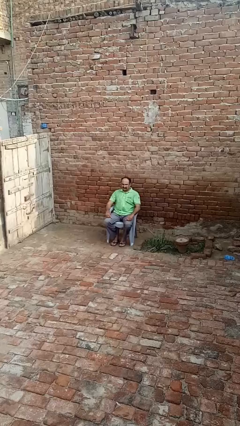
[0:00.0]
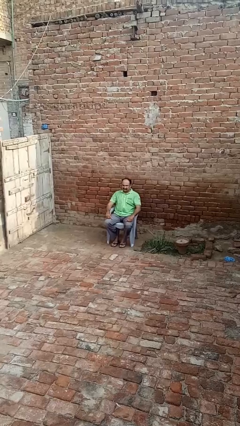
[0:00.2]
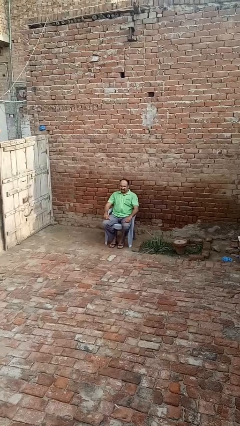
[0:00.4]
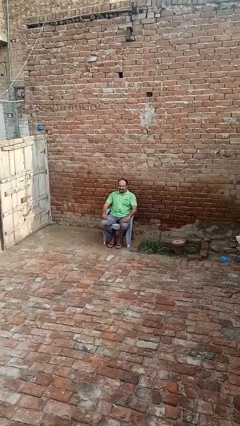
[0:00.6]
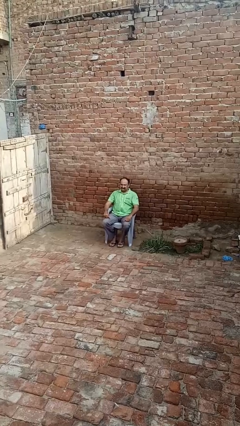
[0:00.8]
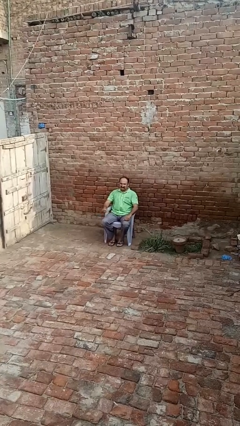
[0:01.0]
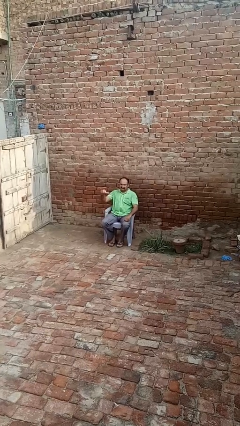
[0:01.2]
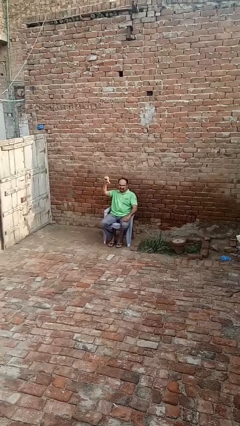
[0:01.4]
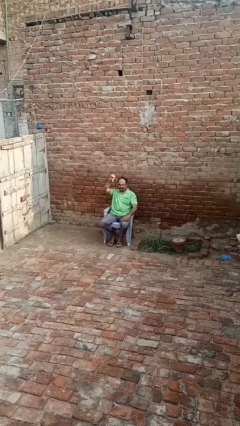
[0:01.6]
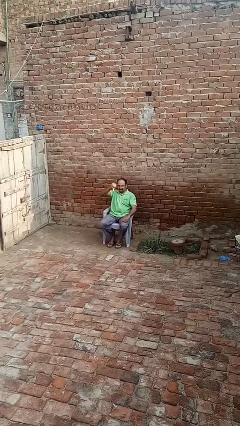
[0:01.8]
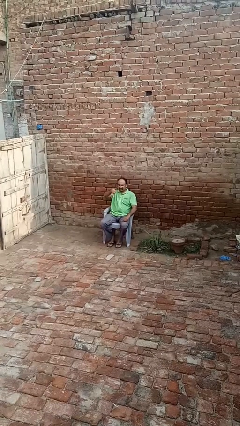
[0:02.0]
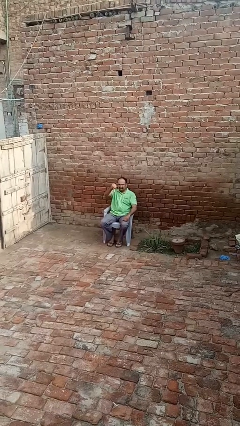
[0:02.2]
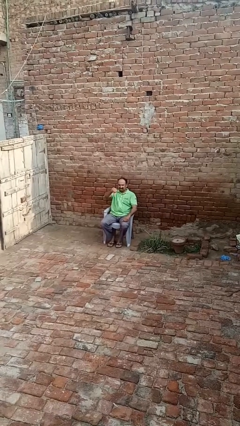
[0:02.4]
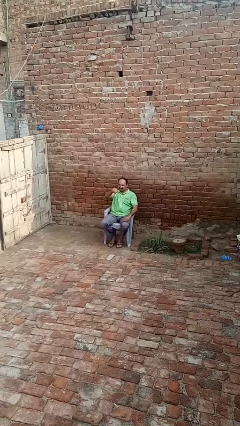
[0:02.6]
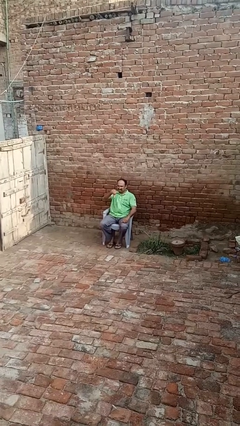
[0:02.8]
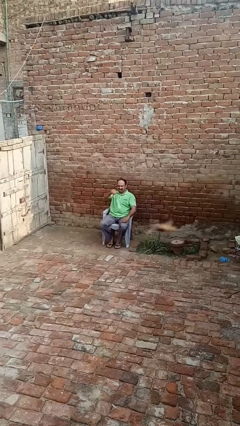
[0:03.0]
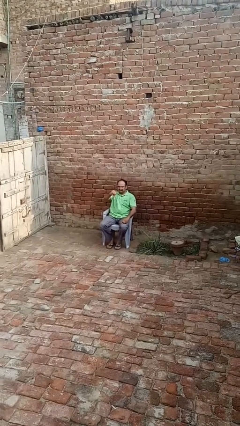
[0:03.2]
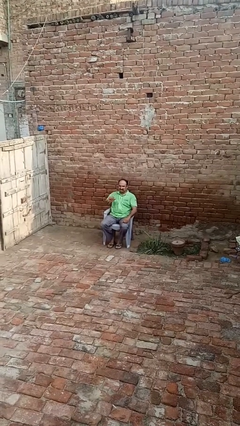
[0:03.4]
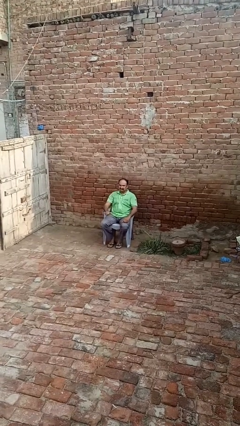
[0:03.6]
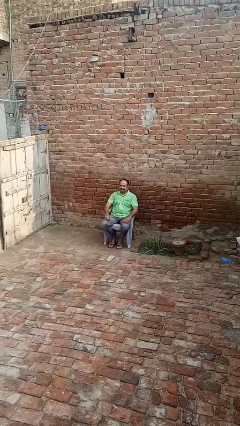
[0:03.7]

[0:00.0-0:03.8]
person gestures thumbs down

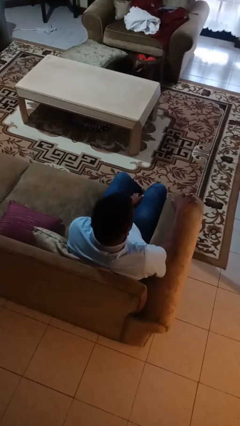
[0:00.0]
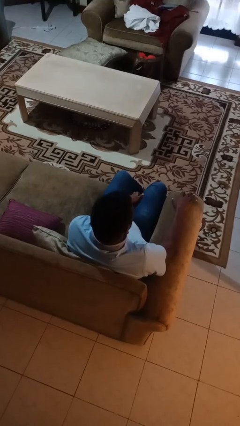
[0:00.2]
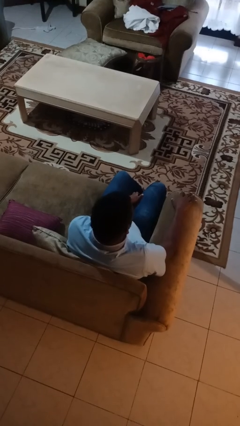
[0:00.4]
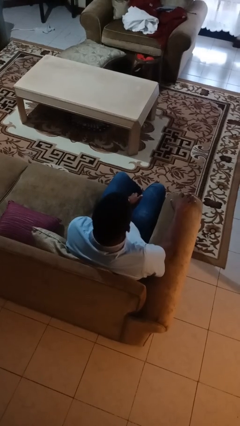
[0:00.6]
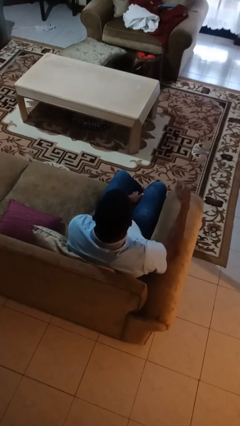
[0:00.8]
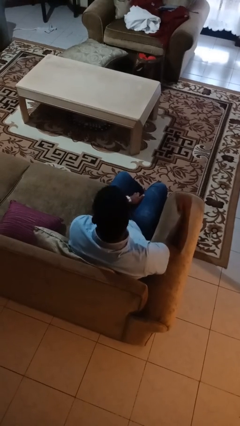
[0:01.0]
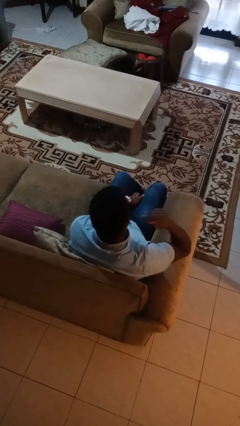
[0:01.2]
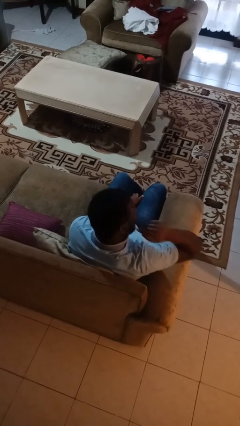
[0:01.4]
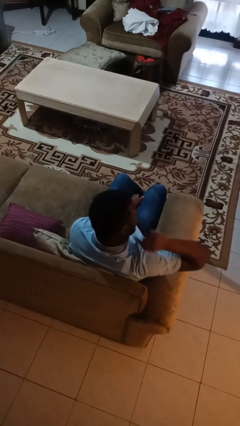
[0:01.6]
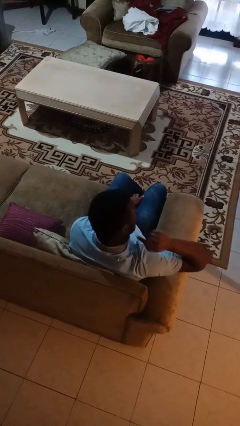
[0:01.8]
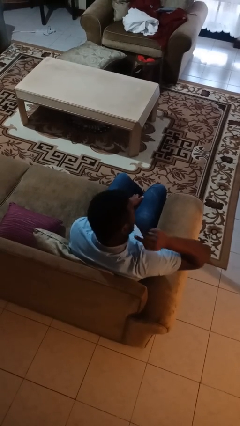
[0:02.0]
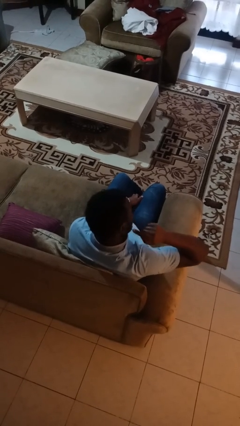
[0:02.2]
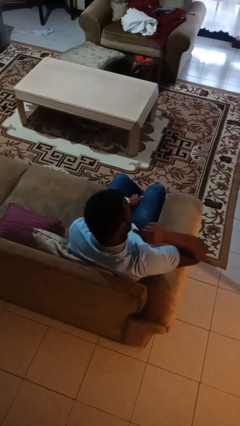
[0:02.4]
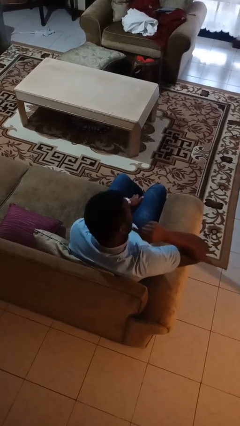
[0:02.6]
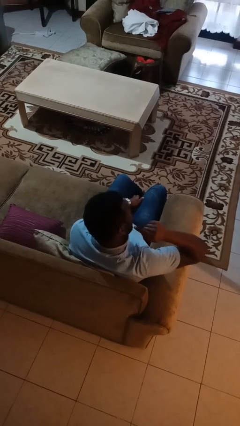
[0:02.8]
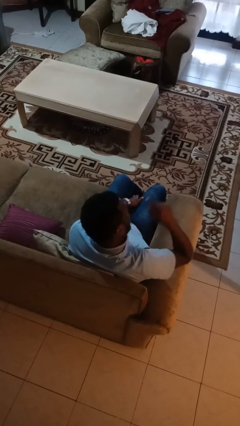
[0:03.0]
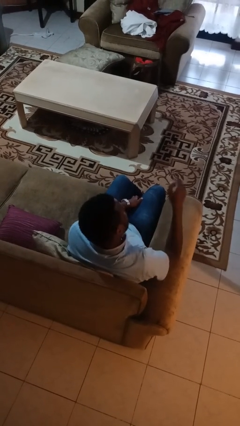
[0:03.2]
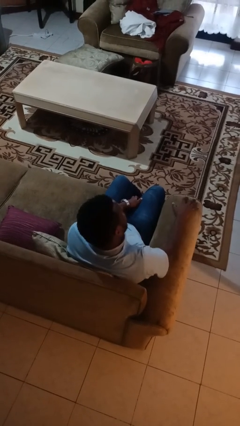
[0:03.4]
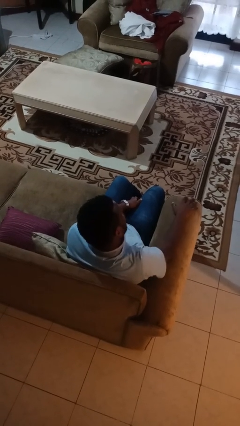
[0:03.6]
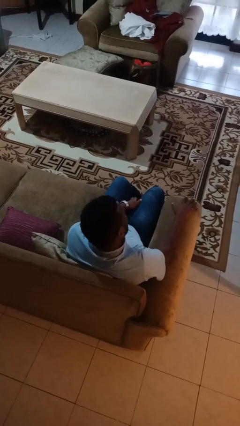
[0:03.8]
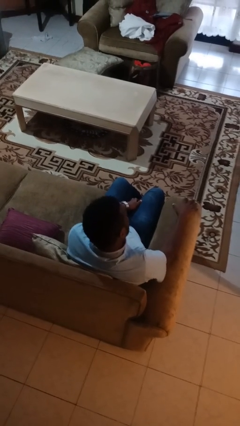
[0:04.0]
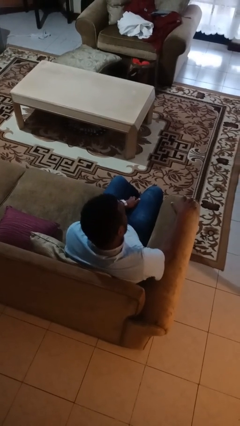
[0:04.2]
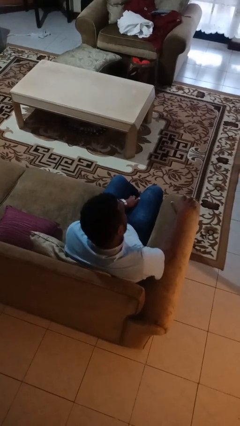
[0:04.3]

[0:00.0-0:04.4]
person gestures listen closely

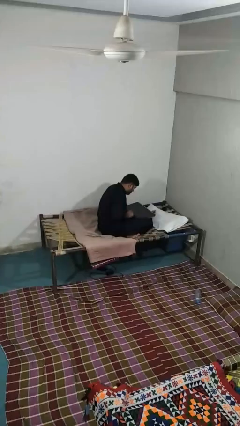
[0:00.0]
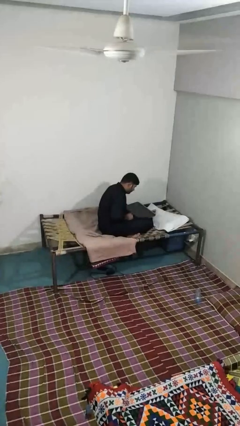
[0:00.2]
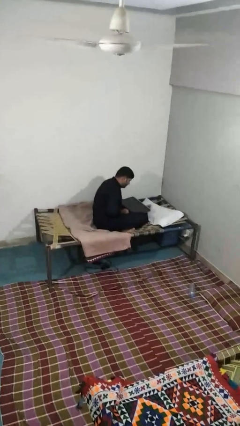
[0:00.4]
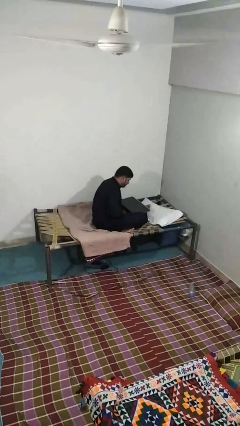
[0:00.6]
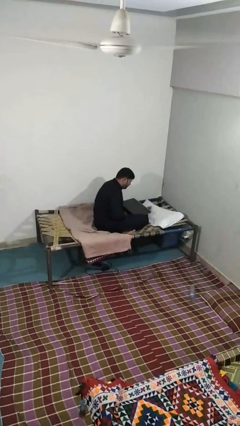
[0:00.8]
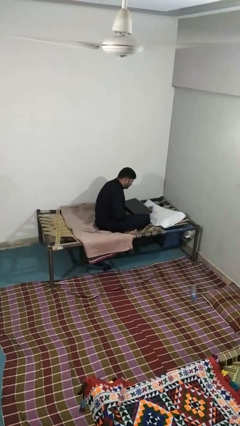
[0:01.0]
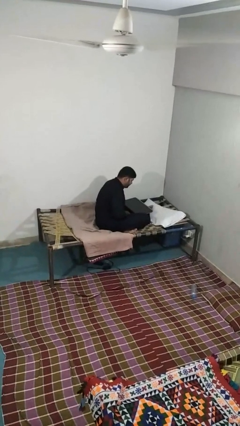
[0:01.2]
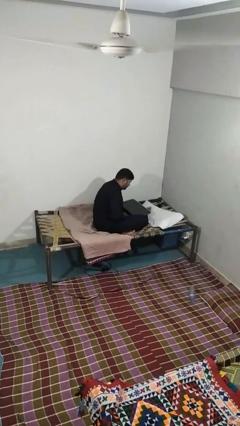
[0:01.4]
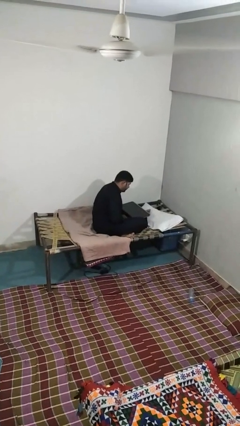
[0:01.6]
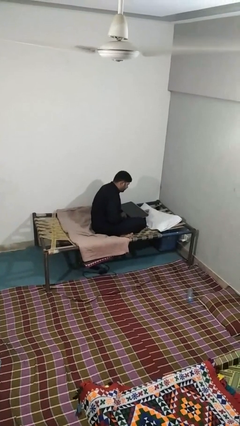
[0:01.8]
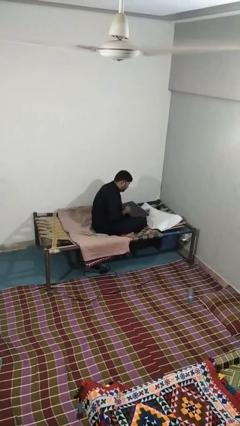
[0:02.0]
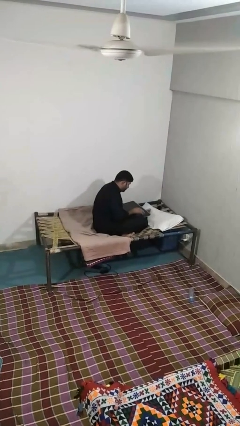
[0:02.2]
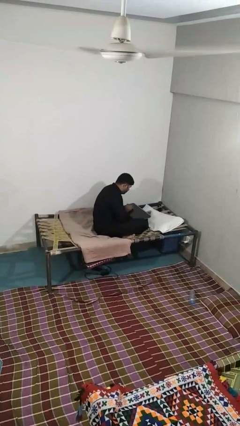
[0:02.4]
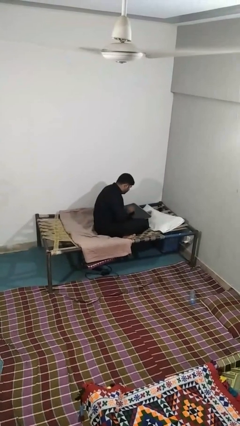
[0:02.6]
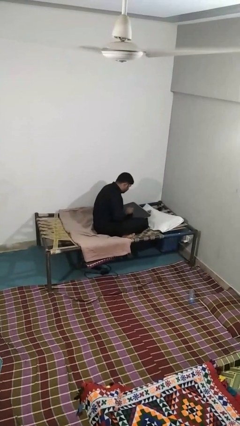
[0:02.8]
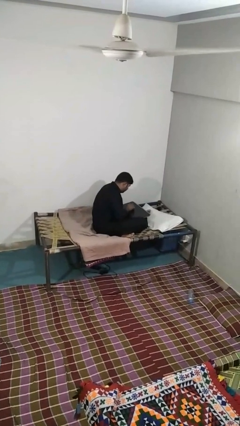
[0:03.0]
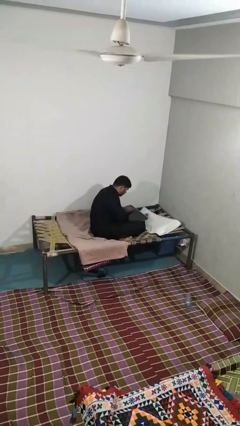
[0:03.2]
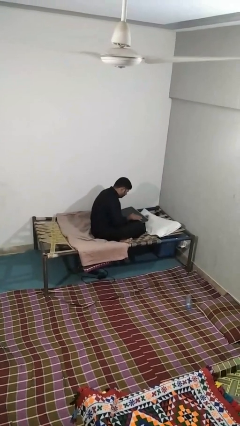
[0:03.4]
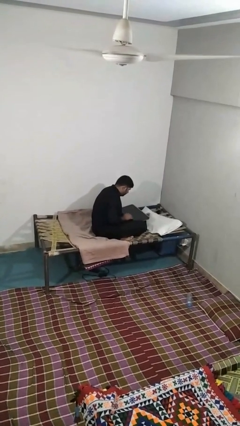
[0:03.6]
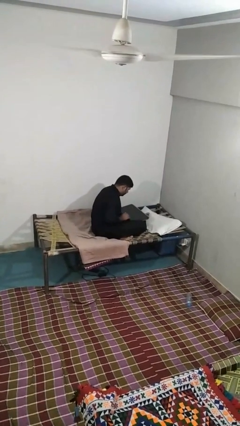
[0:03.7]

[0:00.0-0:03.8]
person interacts with tablet

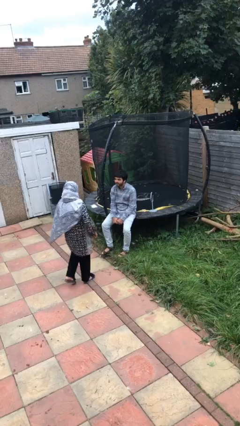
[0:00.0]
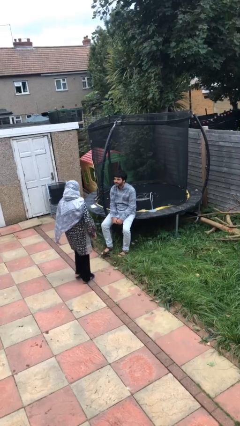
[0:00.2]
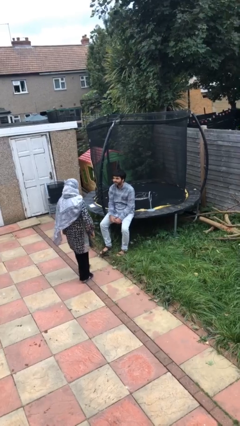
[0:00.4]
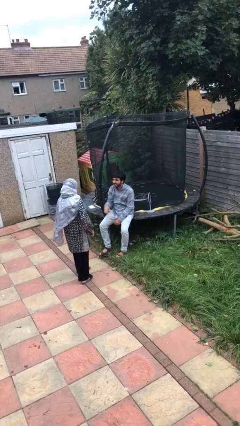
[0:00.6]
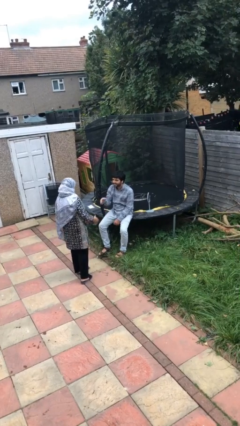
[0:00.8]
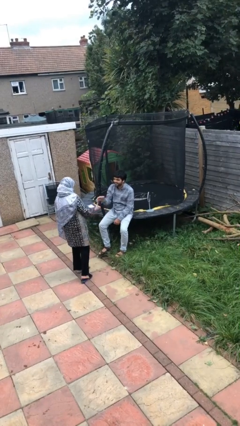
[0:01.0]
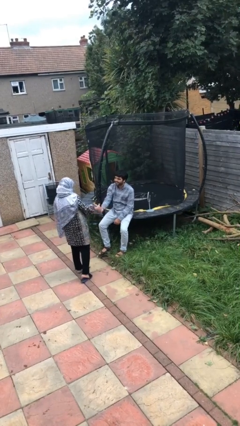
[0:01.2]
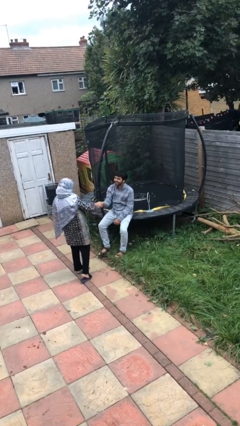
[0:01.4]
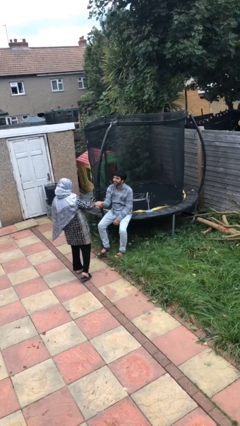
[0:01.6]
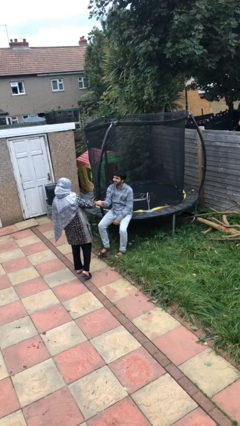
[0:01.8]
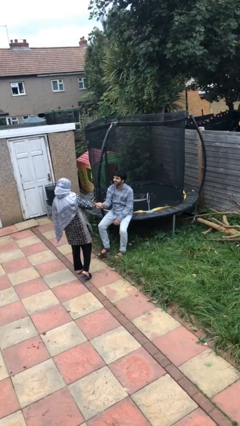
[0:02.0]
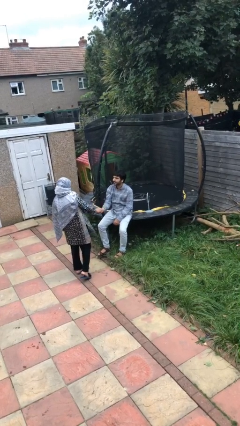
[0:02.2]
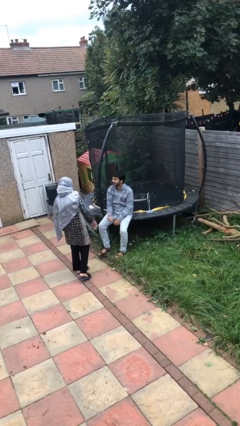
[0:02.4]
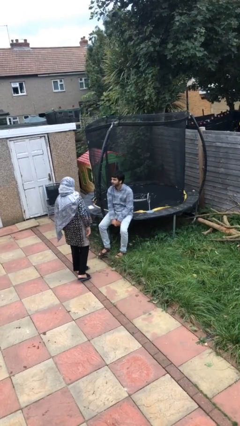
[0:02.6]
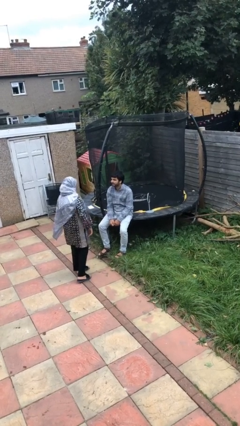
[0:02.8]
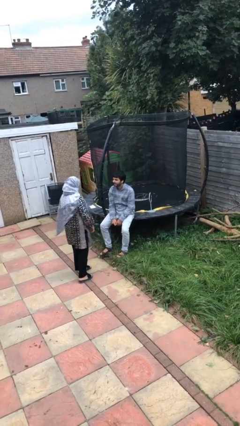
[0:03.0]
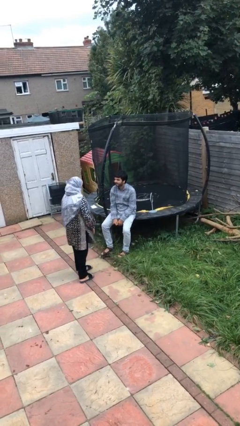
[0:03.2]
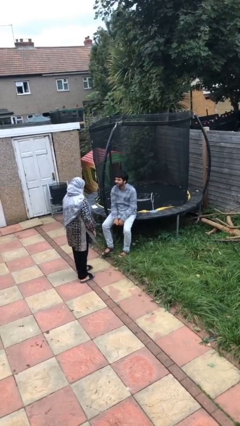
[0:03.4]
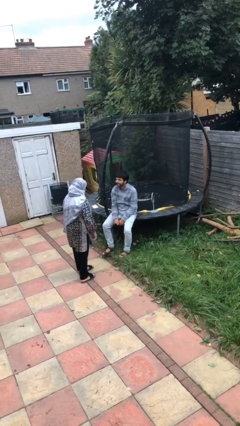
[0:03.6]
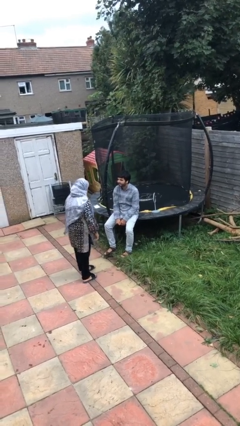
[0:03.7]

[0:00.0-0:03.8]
person shakes hand

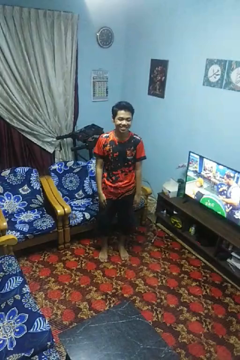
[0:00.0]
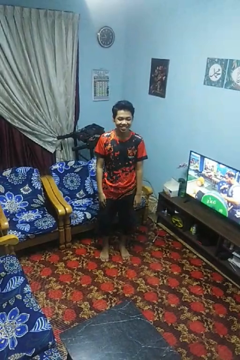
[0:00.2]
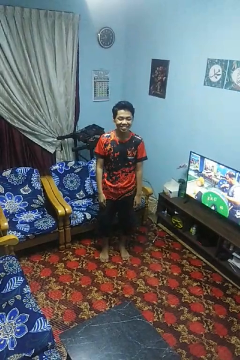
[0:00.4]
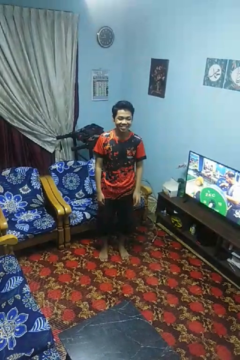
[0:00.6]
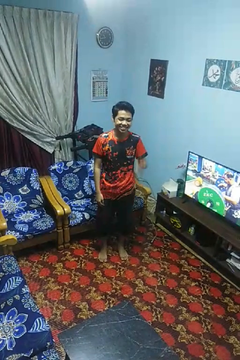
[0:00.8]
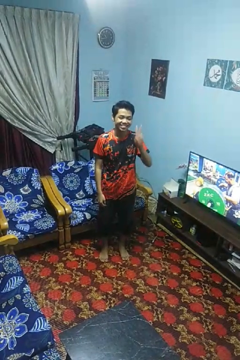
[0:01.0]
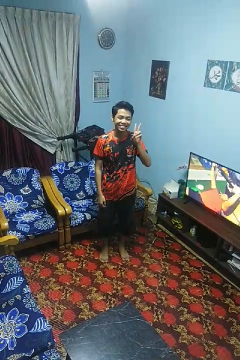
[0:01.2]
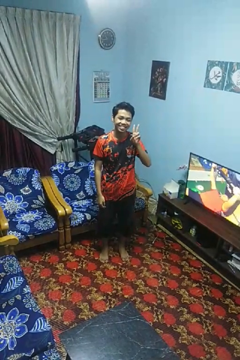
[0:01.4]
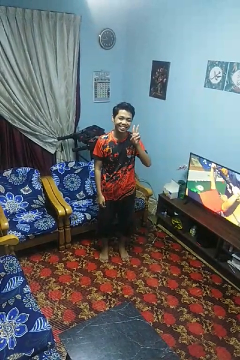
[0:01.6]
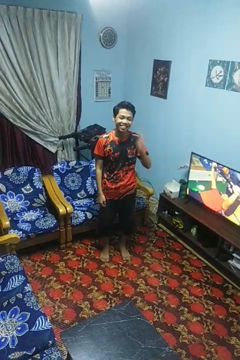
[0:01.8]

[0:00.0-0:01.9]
person gestures peace

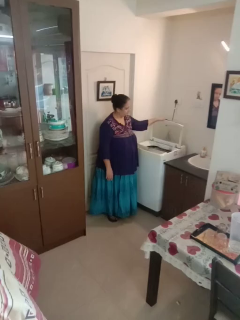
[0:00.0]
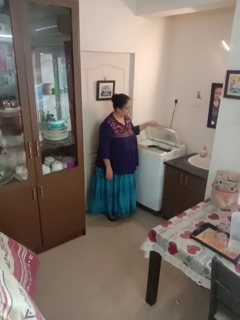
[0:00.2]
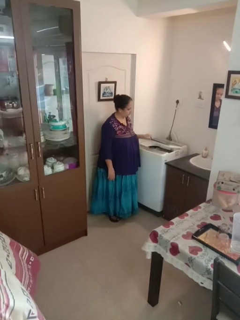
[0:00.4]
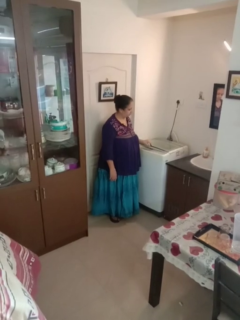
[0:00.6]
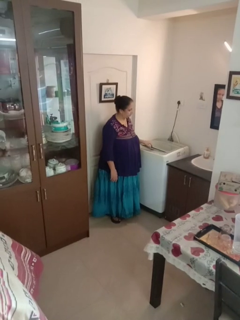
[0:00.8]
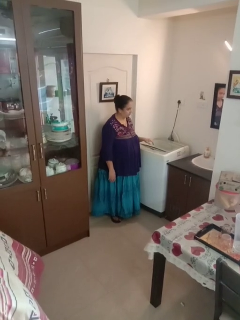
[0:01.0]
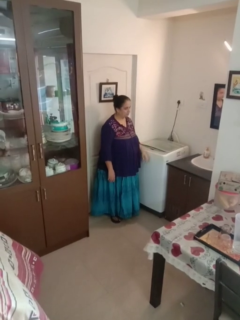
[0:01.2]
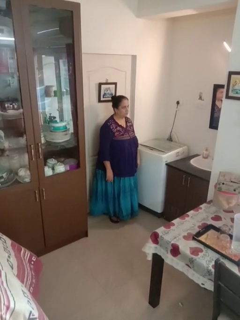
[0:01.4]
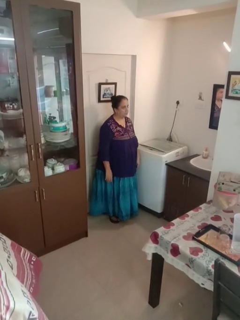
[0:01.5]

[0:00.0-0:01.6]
person closes clothes washer
